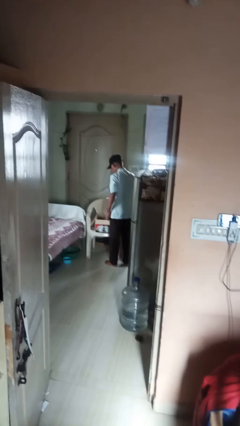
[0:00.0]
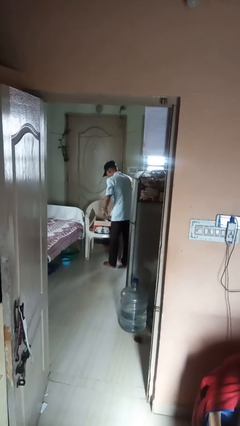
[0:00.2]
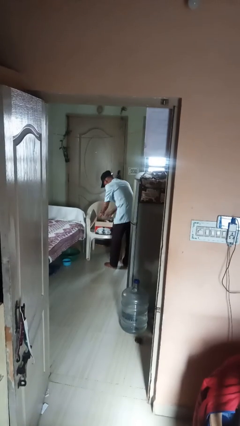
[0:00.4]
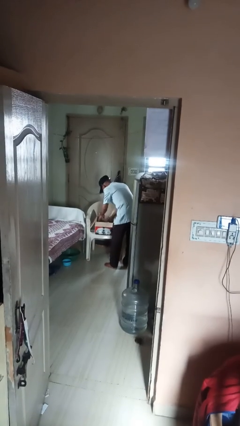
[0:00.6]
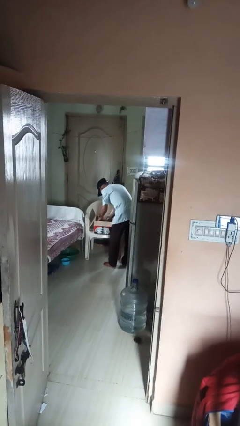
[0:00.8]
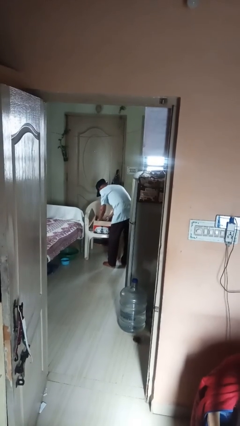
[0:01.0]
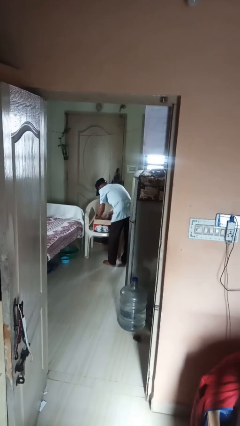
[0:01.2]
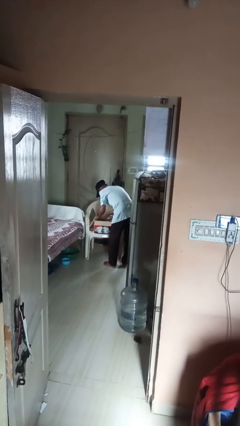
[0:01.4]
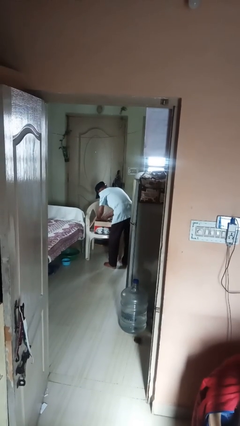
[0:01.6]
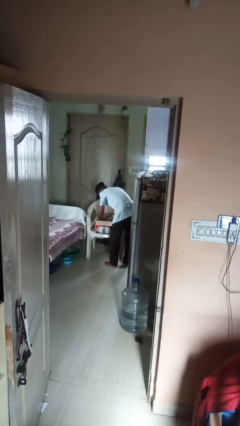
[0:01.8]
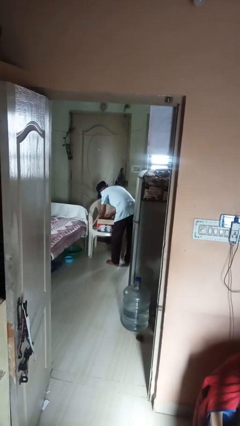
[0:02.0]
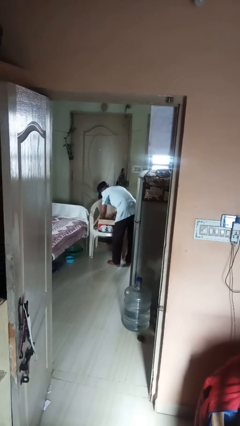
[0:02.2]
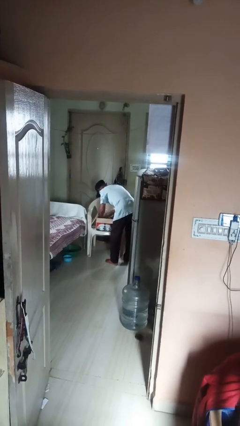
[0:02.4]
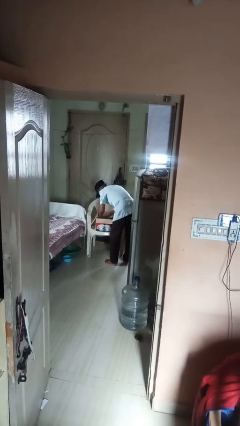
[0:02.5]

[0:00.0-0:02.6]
person searches in box

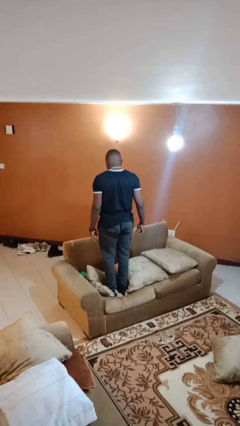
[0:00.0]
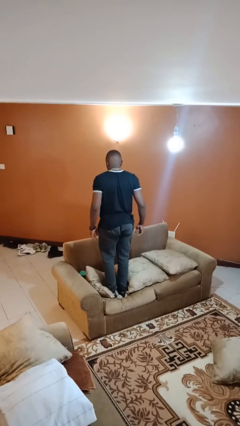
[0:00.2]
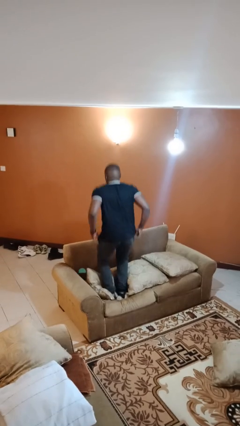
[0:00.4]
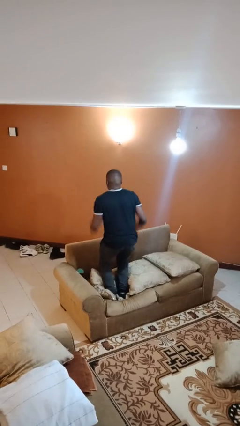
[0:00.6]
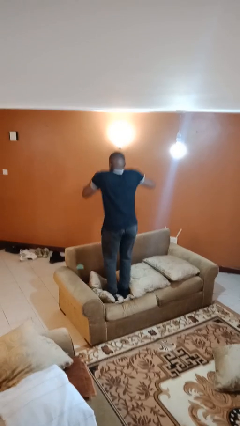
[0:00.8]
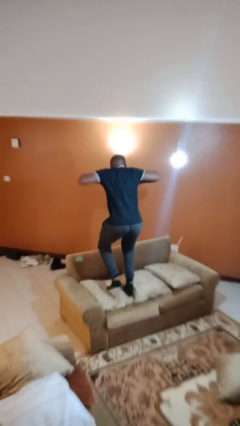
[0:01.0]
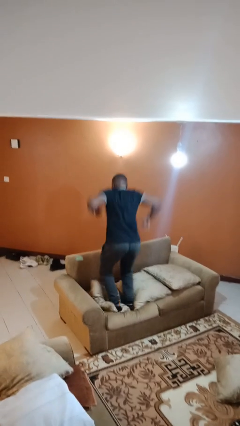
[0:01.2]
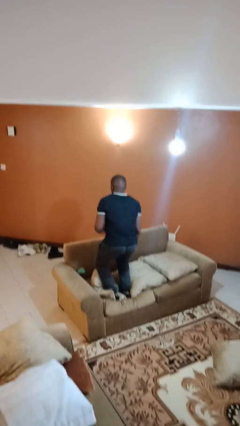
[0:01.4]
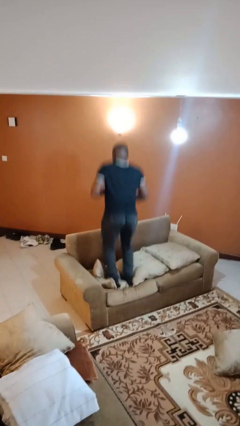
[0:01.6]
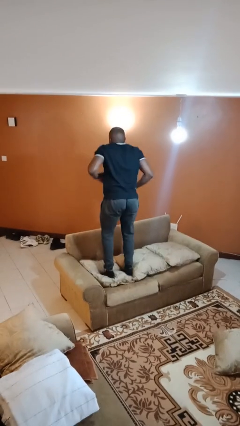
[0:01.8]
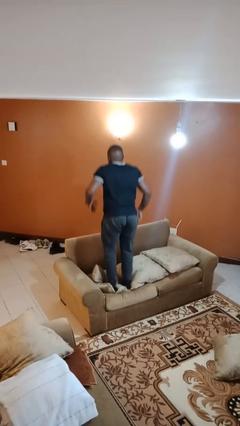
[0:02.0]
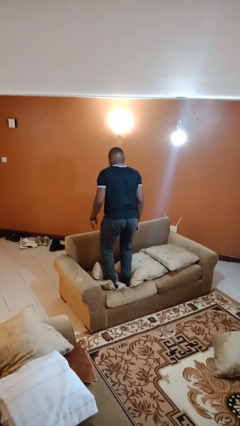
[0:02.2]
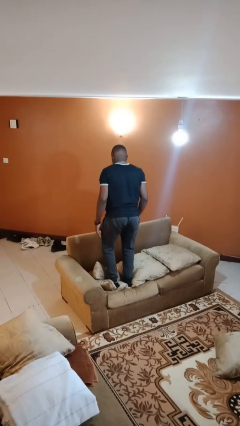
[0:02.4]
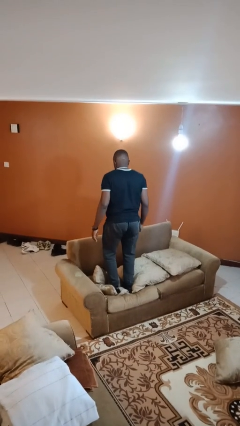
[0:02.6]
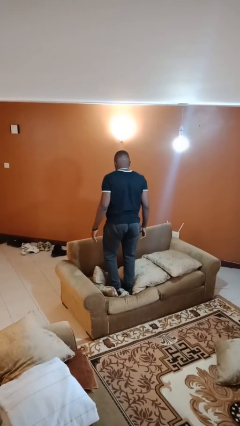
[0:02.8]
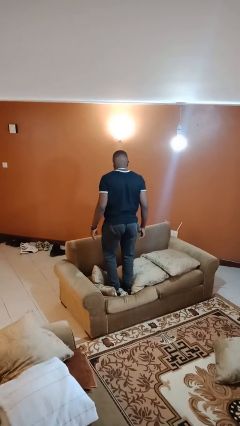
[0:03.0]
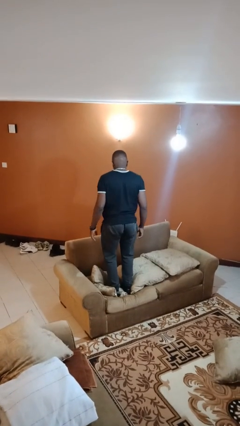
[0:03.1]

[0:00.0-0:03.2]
person jumps on couch

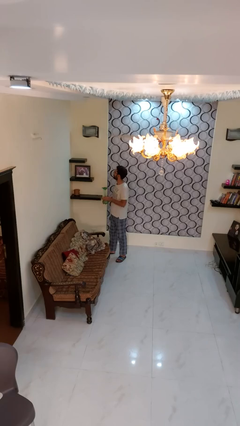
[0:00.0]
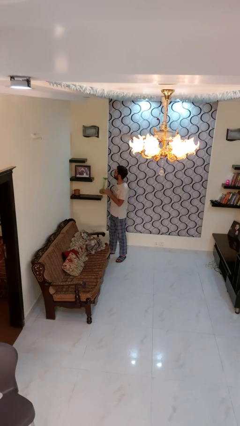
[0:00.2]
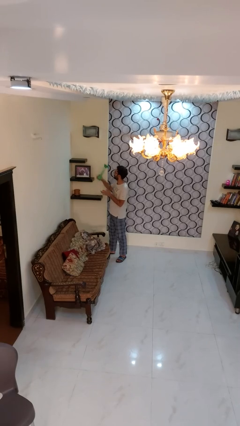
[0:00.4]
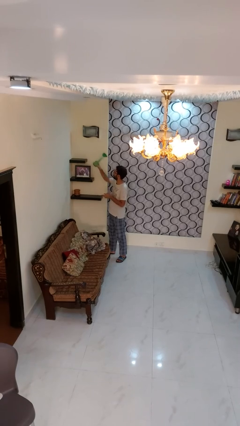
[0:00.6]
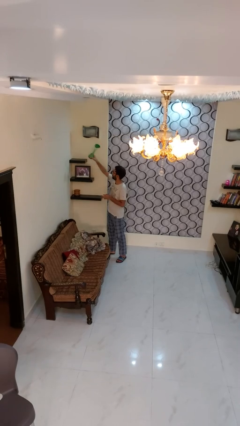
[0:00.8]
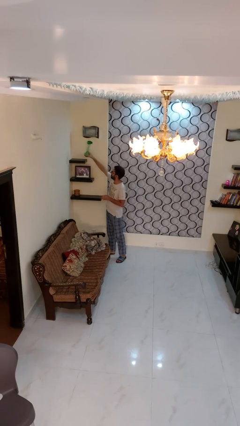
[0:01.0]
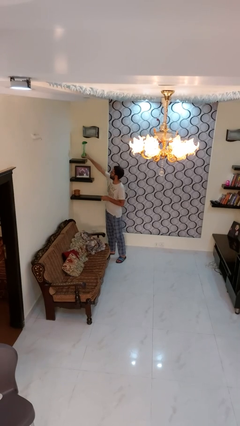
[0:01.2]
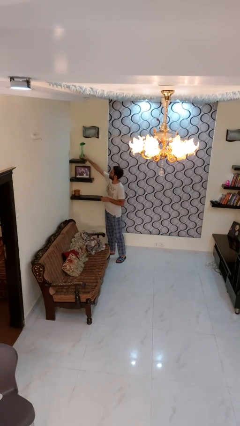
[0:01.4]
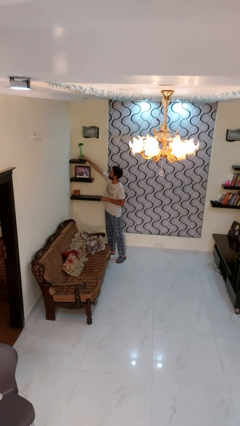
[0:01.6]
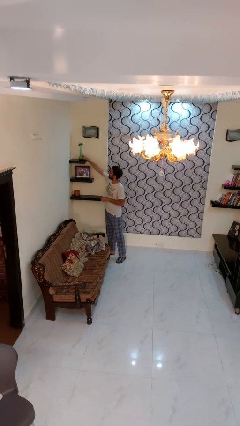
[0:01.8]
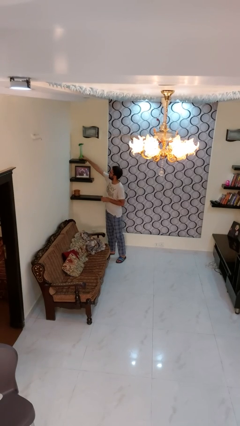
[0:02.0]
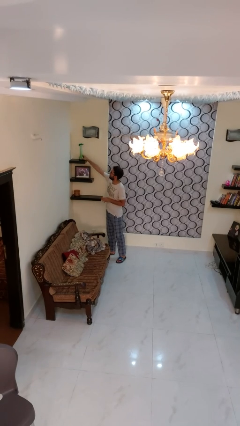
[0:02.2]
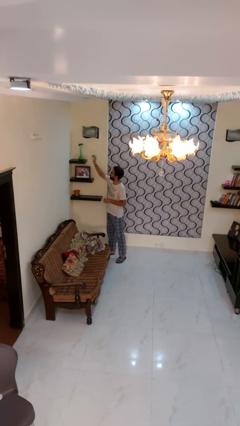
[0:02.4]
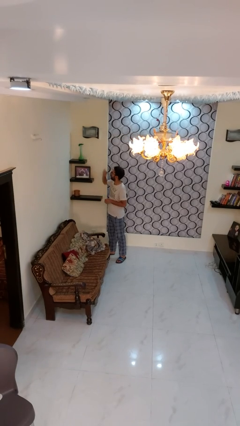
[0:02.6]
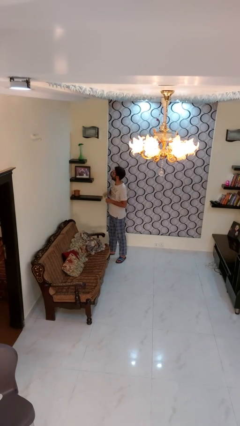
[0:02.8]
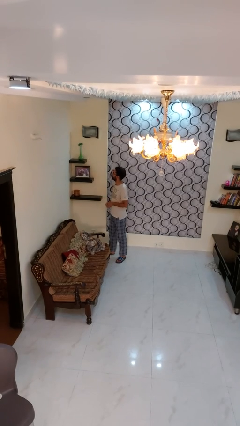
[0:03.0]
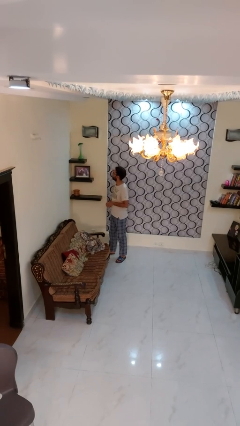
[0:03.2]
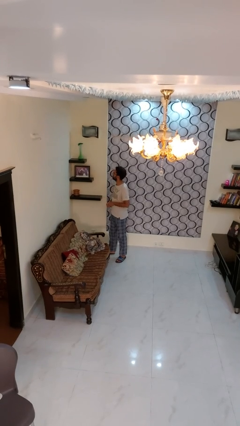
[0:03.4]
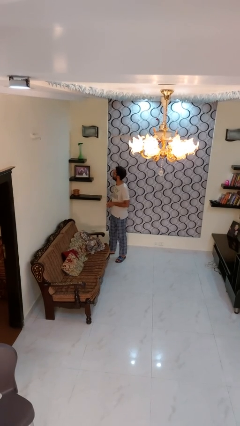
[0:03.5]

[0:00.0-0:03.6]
person puts down object on shelf

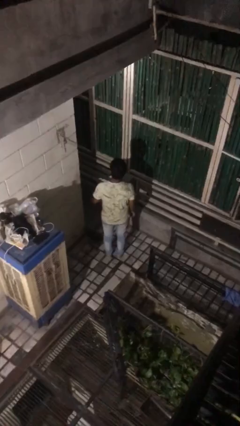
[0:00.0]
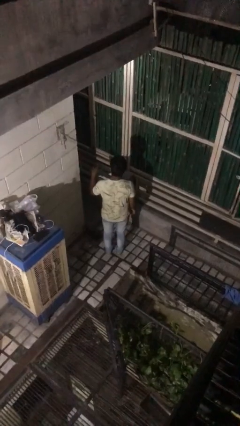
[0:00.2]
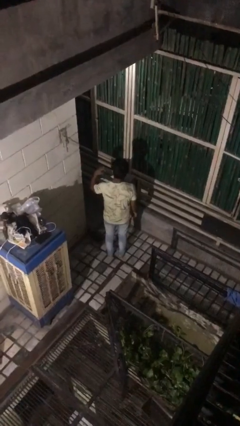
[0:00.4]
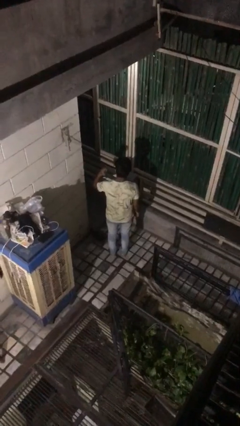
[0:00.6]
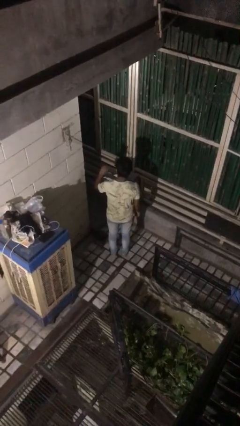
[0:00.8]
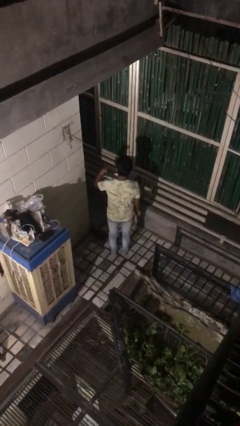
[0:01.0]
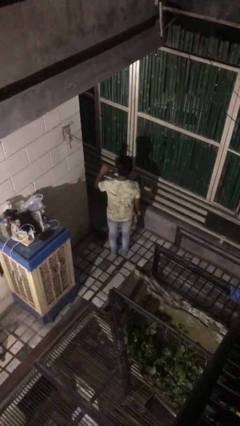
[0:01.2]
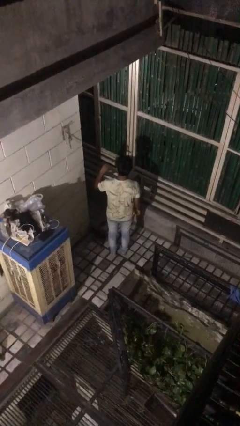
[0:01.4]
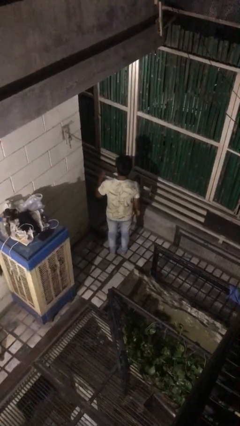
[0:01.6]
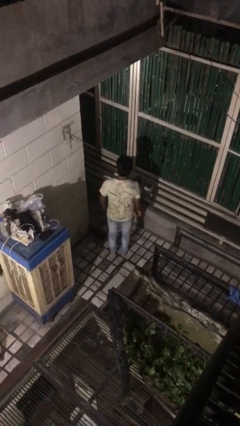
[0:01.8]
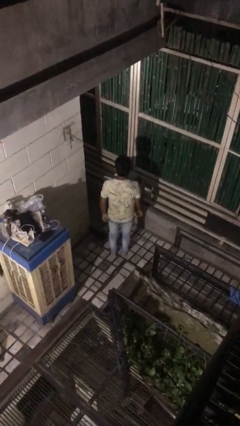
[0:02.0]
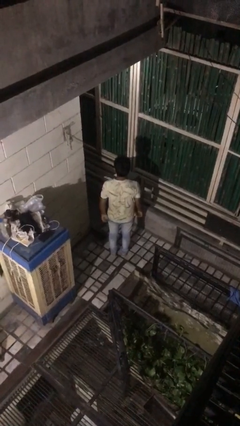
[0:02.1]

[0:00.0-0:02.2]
person gestures behind me

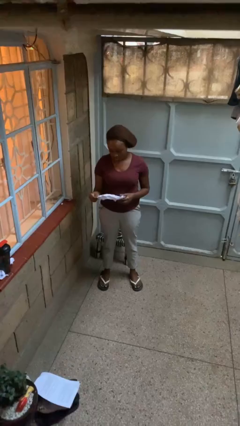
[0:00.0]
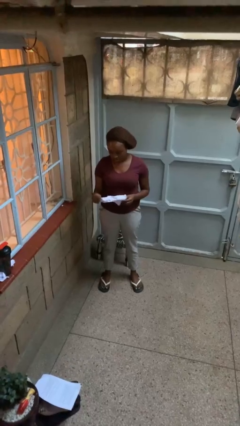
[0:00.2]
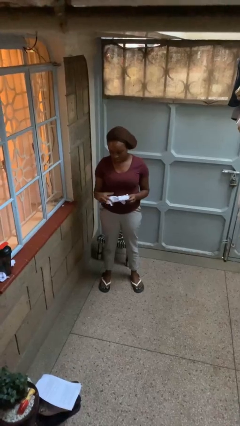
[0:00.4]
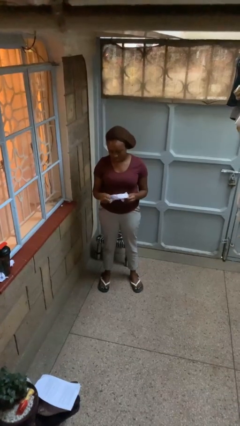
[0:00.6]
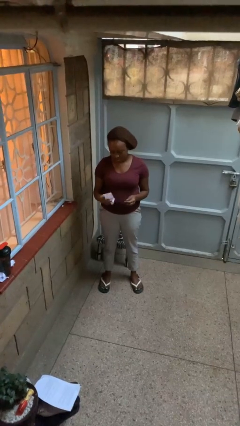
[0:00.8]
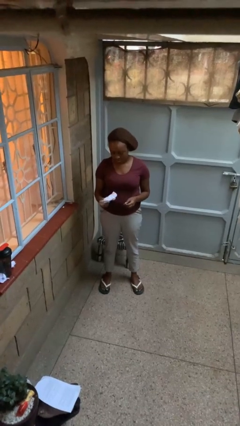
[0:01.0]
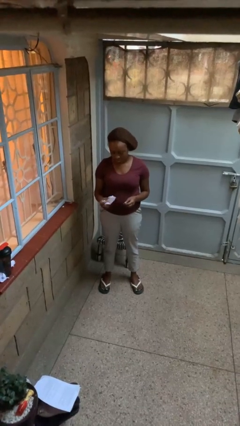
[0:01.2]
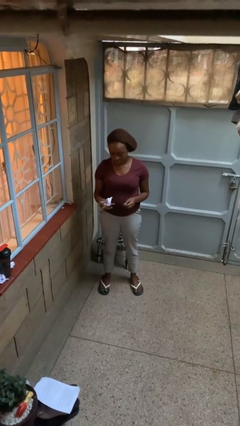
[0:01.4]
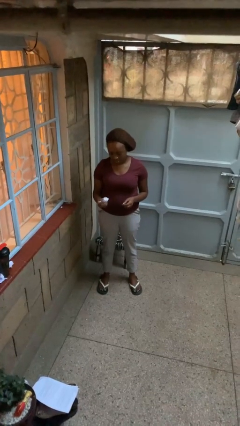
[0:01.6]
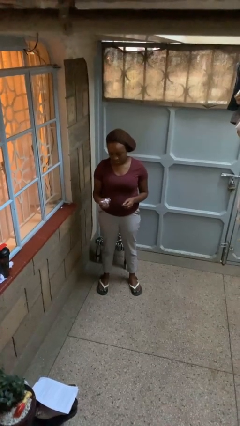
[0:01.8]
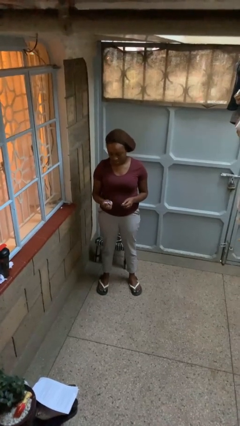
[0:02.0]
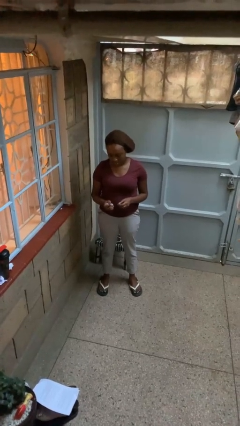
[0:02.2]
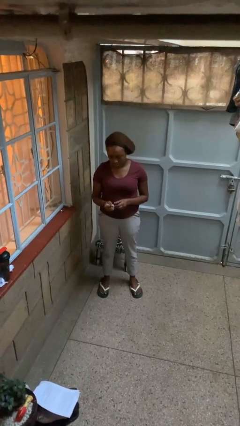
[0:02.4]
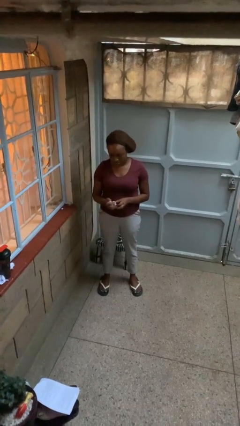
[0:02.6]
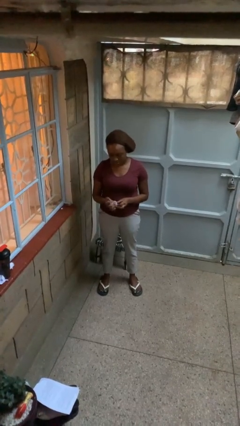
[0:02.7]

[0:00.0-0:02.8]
person crumples paper

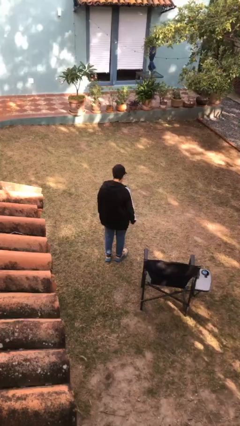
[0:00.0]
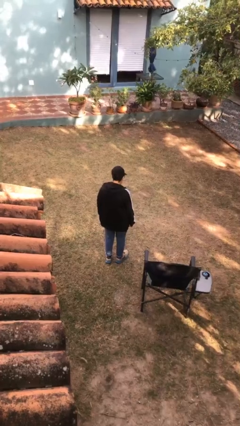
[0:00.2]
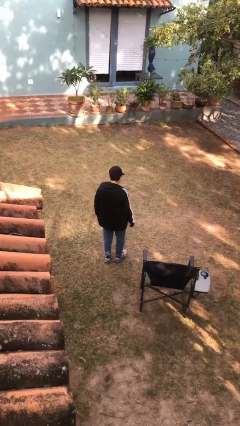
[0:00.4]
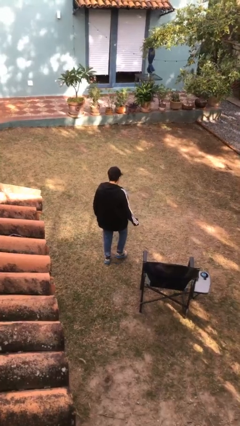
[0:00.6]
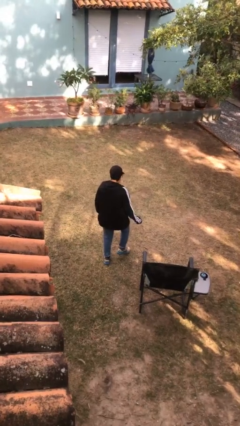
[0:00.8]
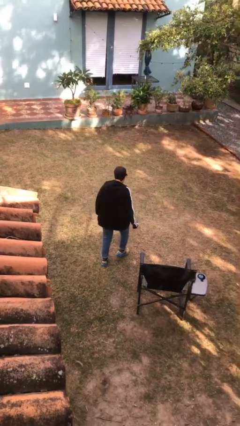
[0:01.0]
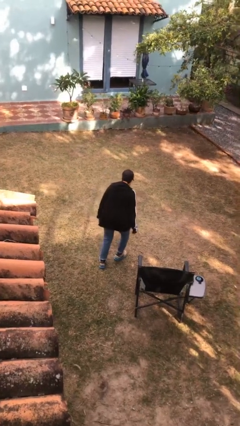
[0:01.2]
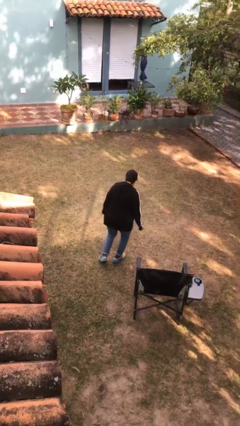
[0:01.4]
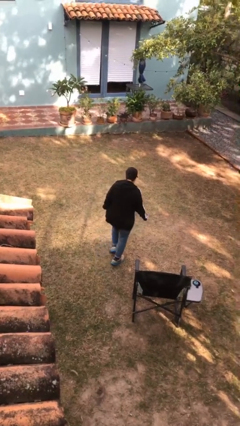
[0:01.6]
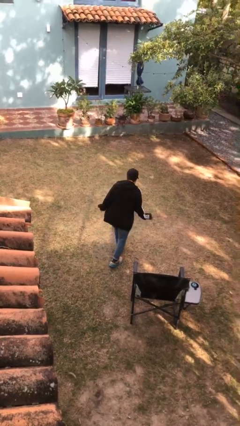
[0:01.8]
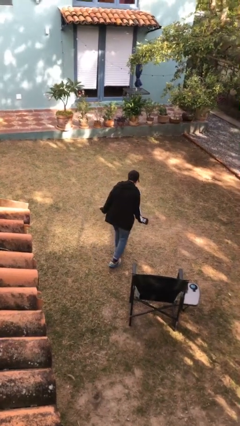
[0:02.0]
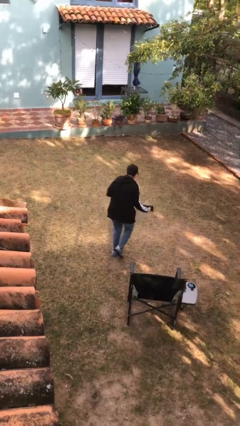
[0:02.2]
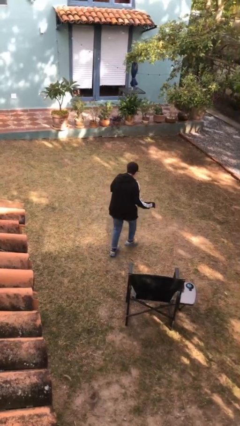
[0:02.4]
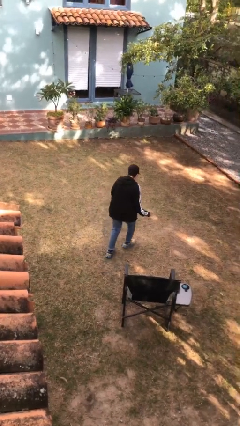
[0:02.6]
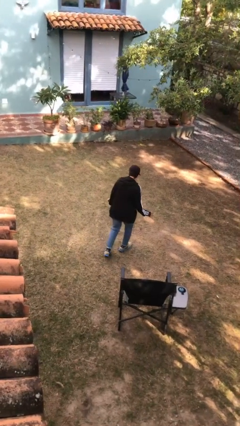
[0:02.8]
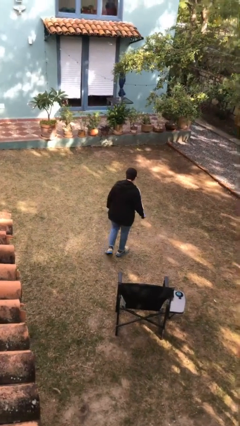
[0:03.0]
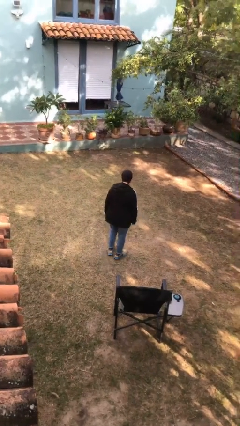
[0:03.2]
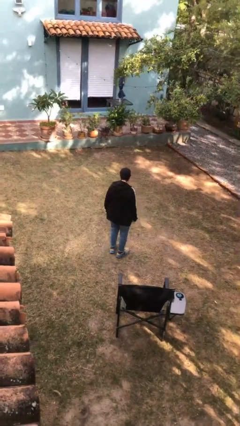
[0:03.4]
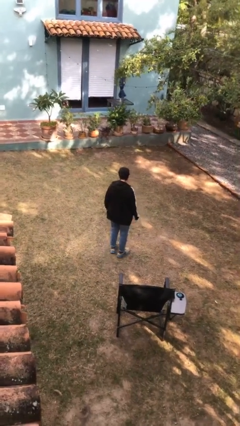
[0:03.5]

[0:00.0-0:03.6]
person walks tiptoe
